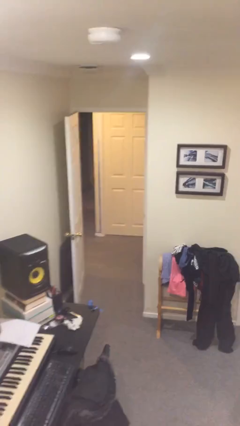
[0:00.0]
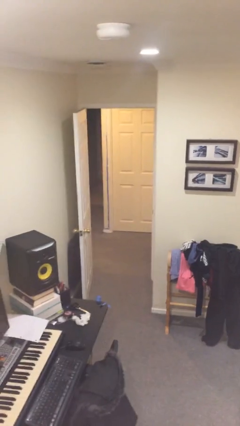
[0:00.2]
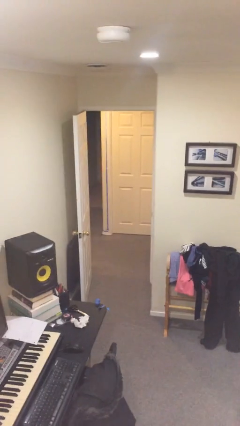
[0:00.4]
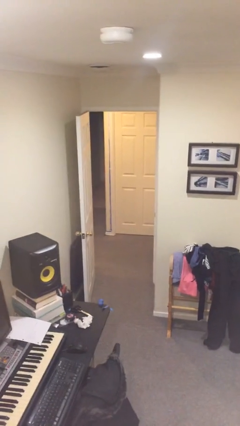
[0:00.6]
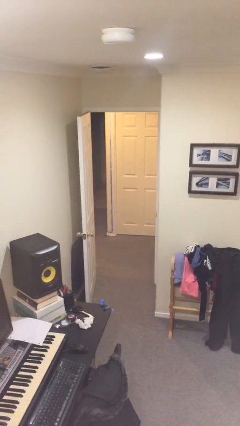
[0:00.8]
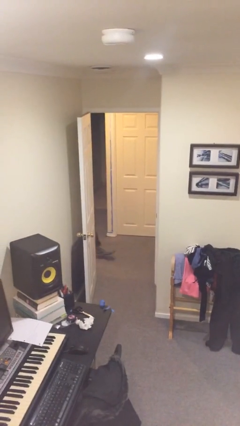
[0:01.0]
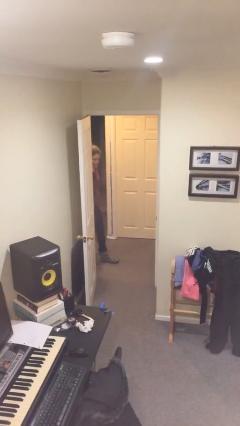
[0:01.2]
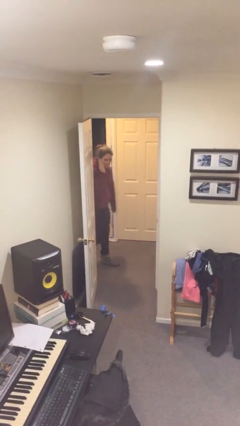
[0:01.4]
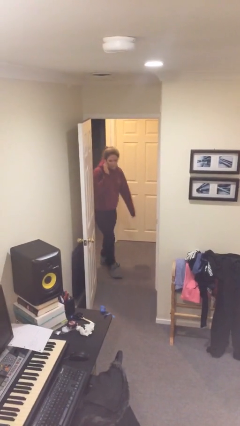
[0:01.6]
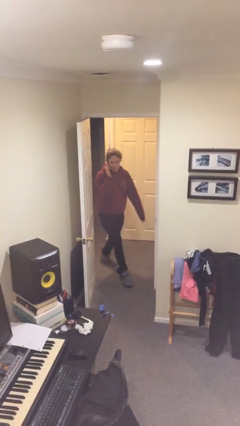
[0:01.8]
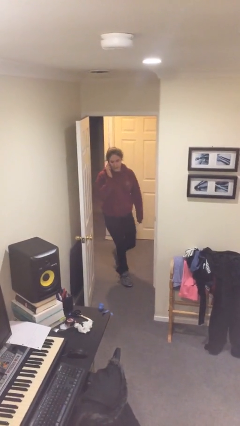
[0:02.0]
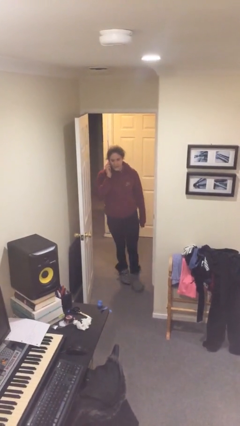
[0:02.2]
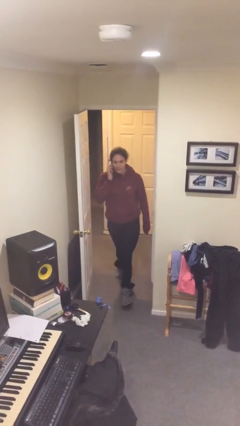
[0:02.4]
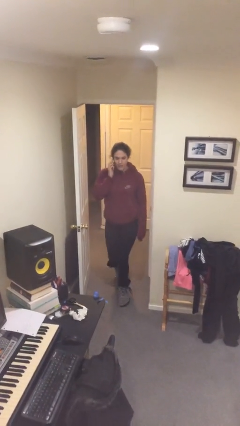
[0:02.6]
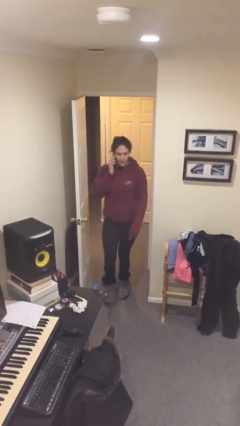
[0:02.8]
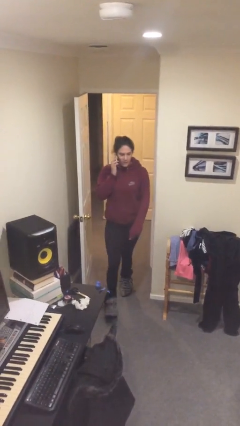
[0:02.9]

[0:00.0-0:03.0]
person enters scene through structure

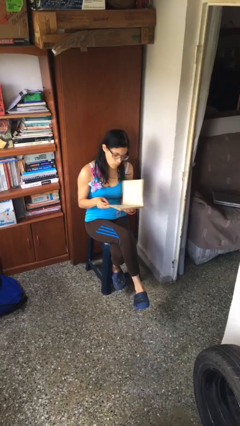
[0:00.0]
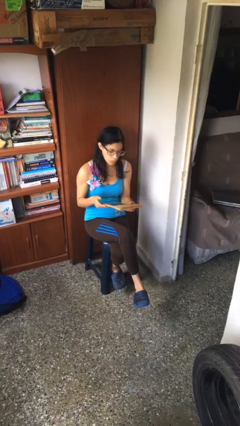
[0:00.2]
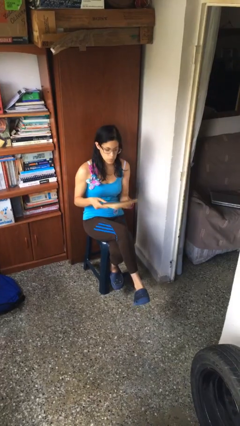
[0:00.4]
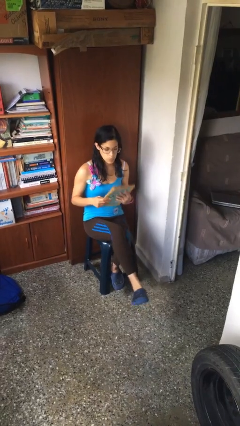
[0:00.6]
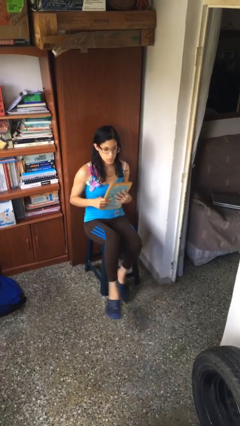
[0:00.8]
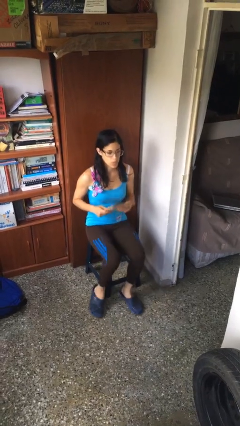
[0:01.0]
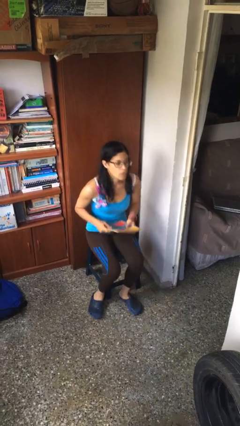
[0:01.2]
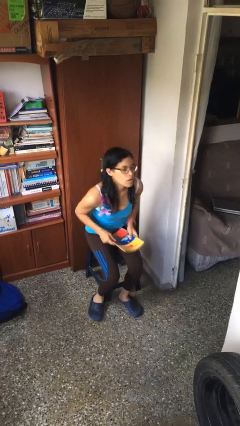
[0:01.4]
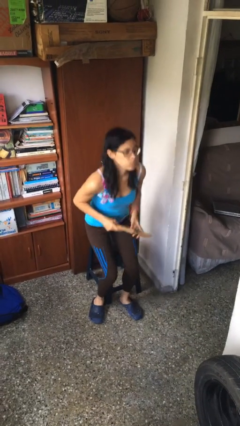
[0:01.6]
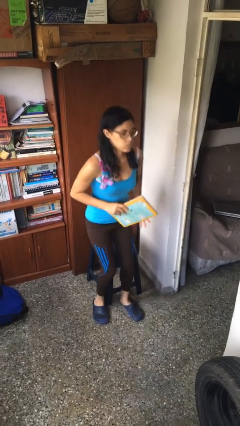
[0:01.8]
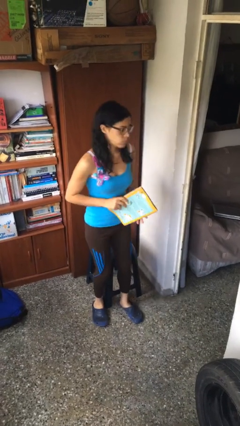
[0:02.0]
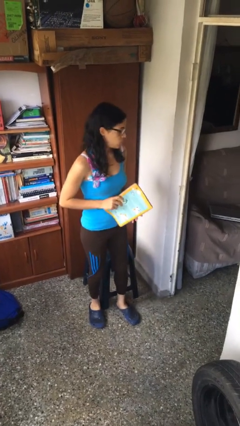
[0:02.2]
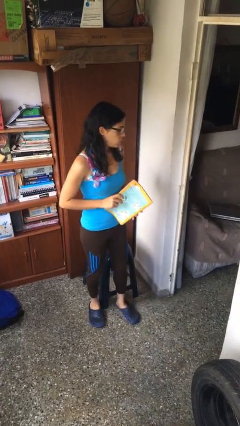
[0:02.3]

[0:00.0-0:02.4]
person stands up

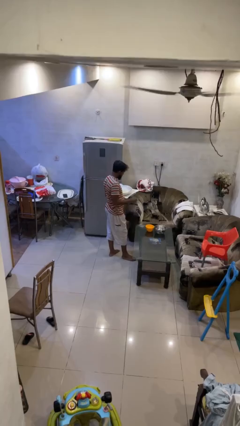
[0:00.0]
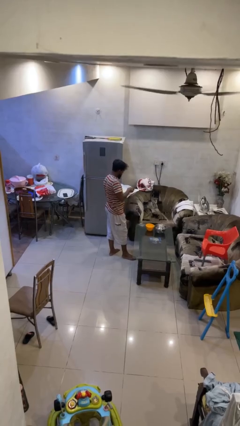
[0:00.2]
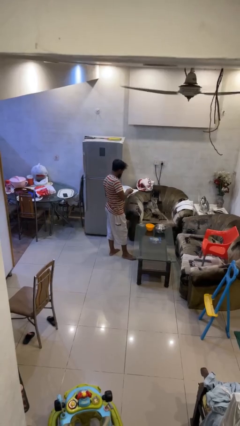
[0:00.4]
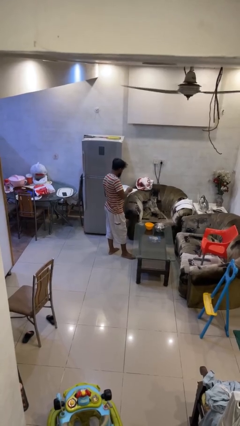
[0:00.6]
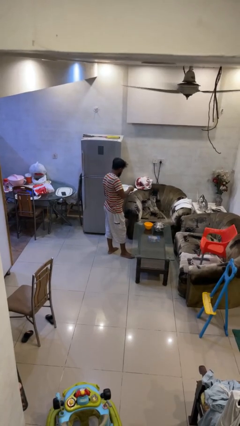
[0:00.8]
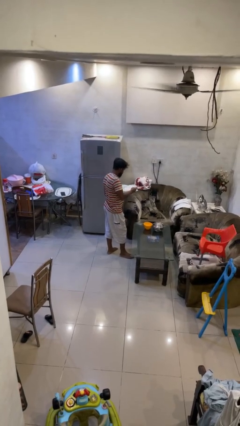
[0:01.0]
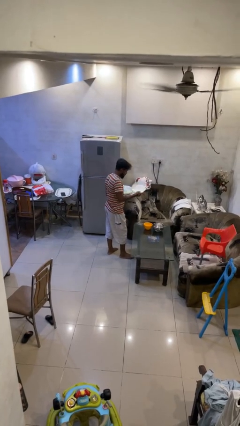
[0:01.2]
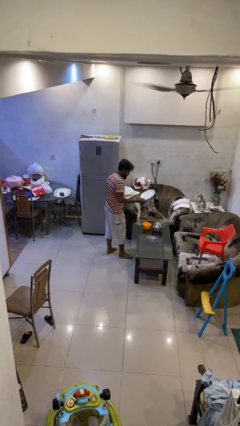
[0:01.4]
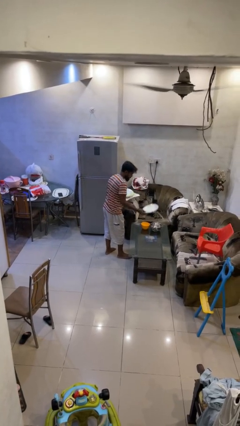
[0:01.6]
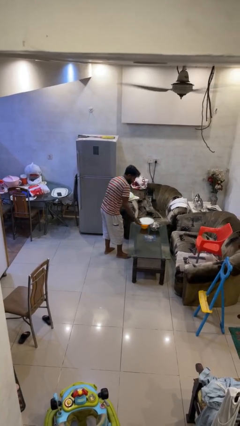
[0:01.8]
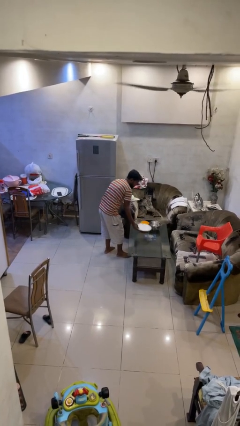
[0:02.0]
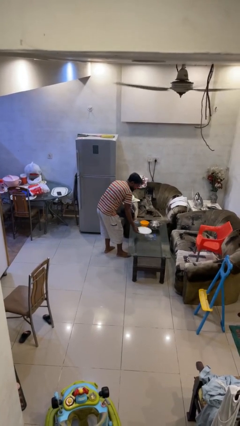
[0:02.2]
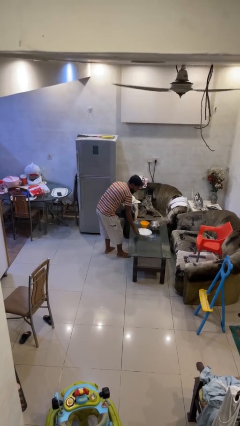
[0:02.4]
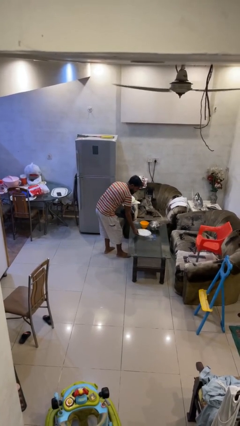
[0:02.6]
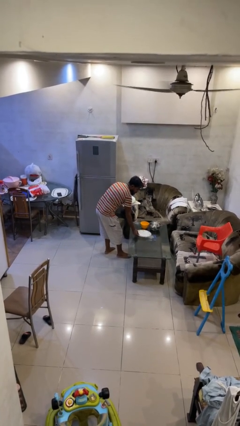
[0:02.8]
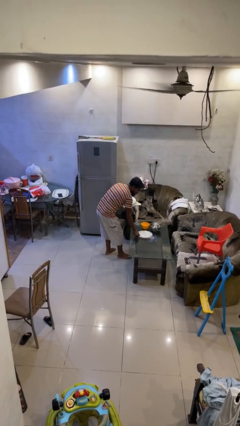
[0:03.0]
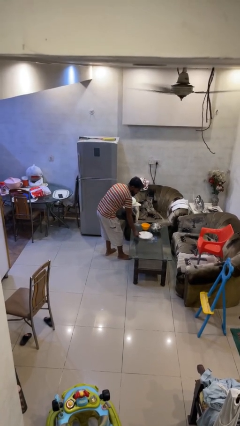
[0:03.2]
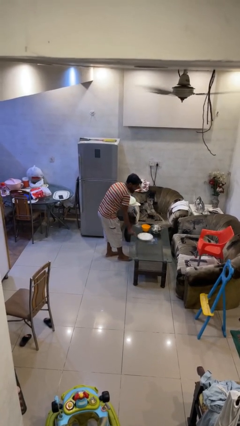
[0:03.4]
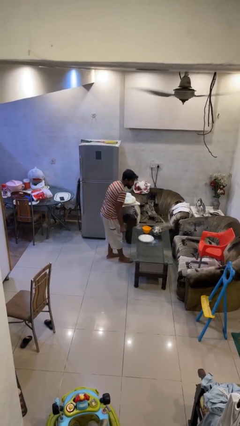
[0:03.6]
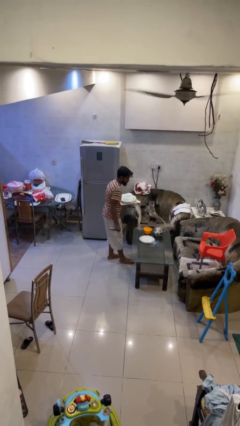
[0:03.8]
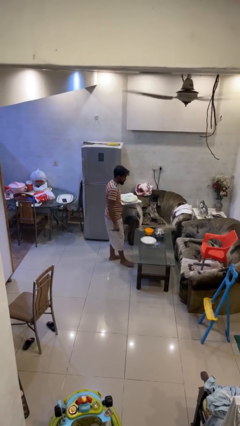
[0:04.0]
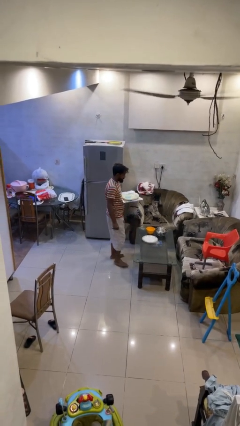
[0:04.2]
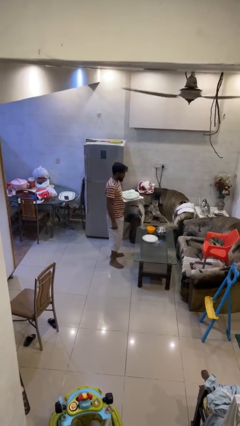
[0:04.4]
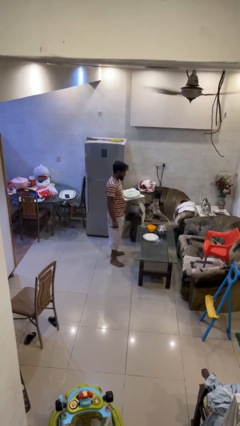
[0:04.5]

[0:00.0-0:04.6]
person sets table

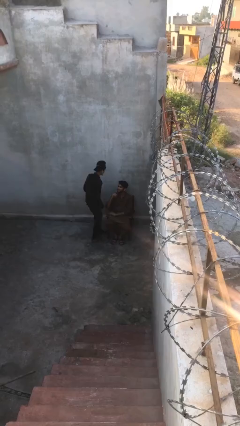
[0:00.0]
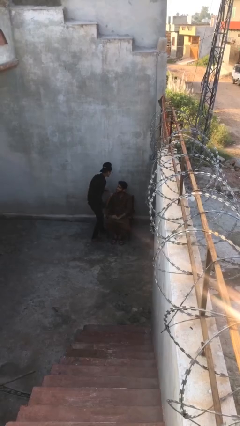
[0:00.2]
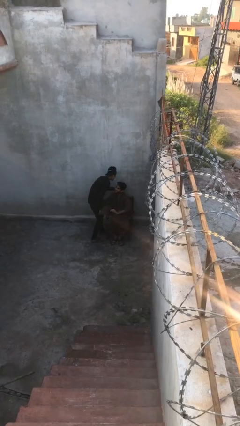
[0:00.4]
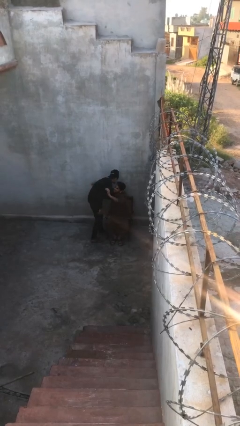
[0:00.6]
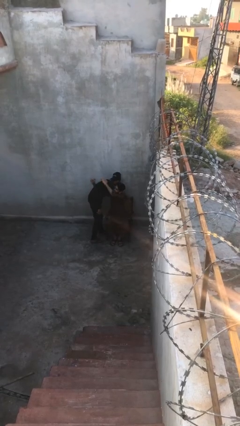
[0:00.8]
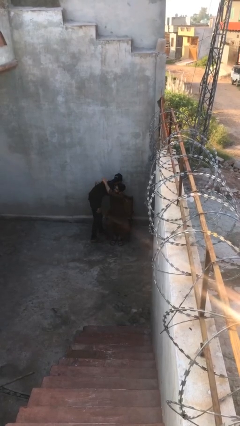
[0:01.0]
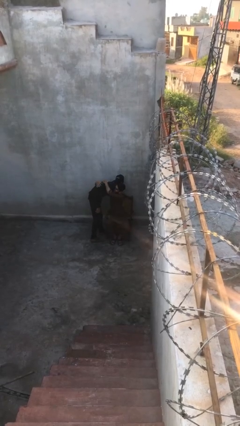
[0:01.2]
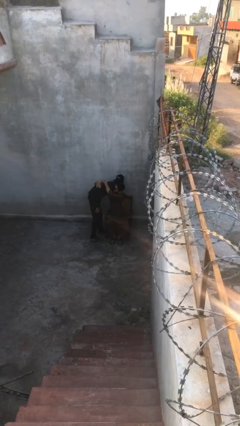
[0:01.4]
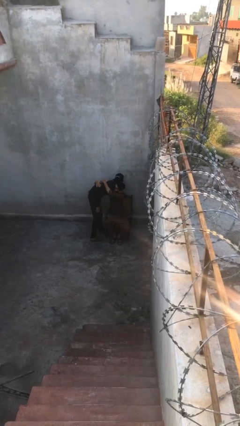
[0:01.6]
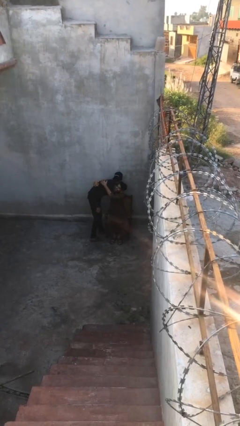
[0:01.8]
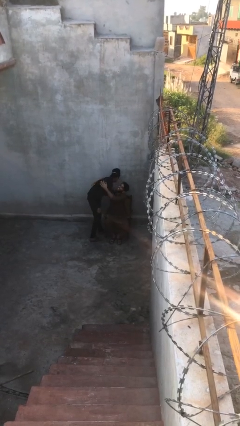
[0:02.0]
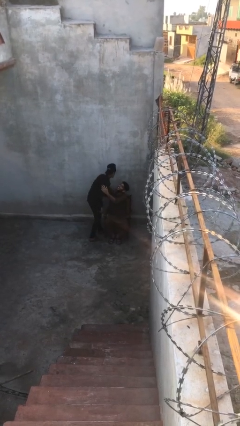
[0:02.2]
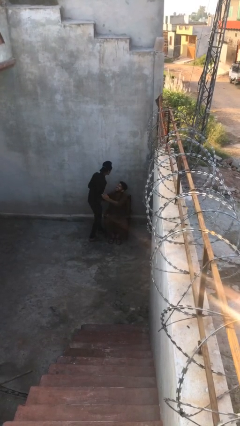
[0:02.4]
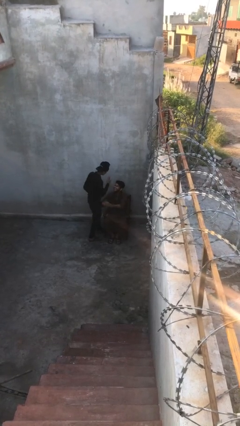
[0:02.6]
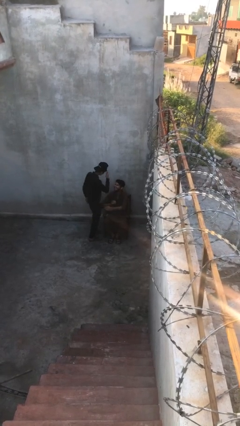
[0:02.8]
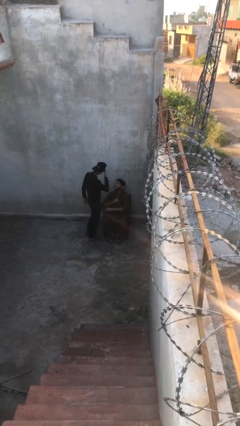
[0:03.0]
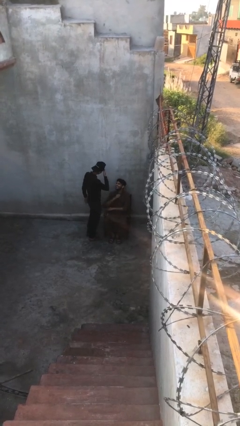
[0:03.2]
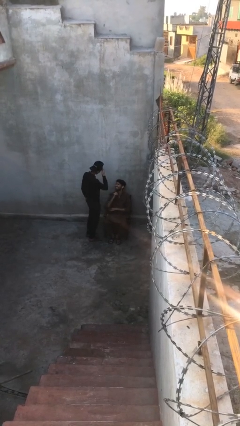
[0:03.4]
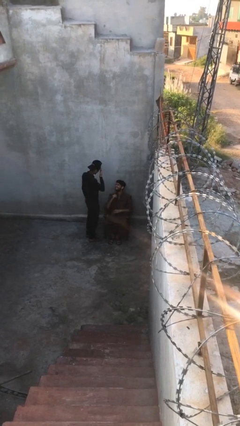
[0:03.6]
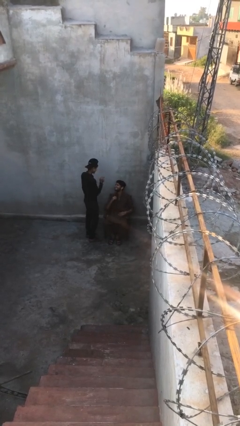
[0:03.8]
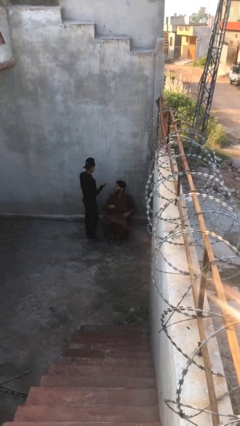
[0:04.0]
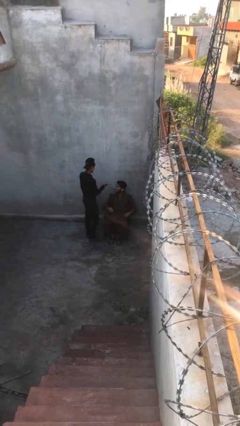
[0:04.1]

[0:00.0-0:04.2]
person embraces person

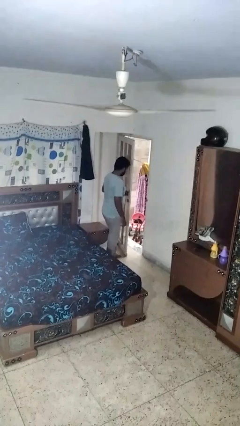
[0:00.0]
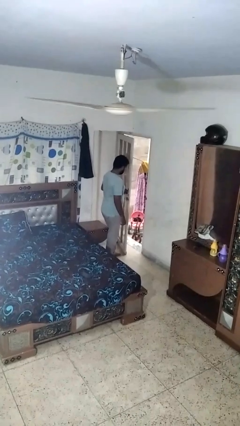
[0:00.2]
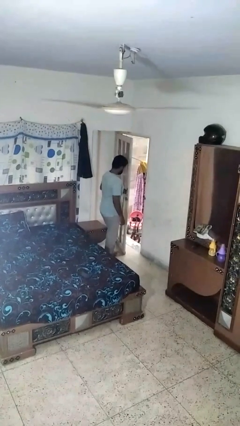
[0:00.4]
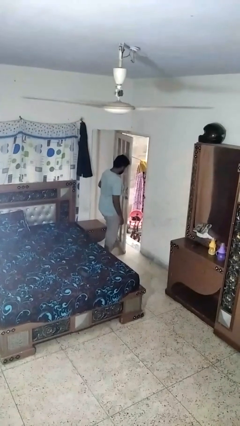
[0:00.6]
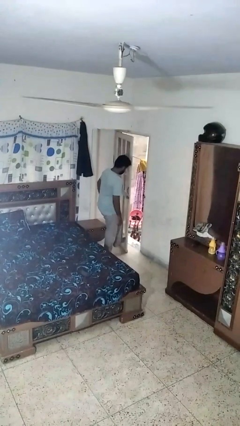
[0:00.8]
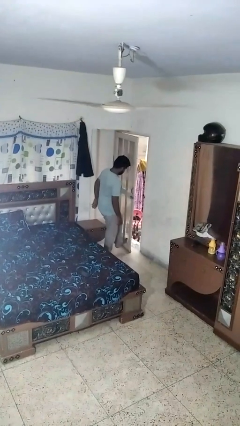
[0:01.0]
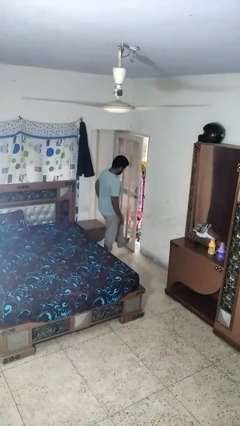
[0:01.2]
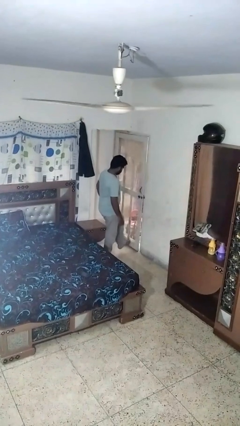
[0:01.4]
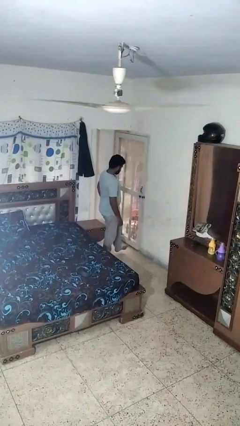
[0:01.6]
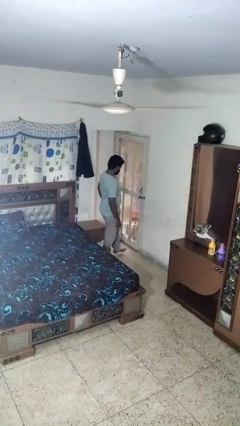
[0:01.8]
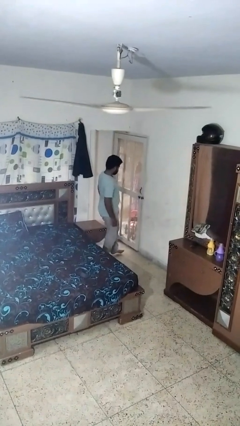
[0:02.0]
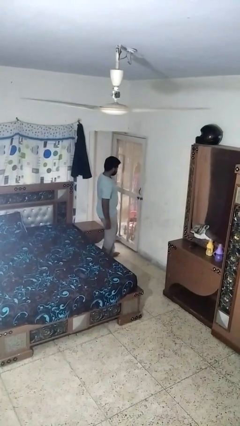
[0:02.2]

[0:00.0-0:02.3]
person closes door with foot

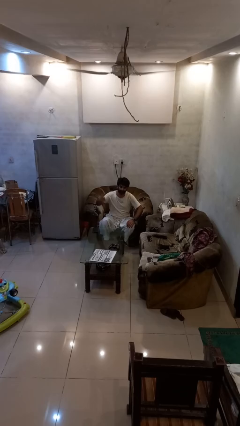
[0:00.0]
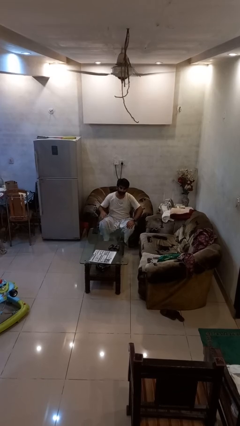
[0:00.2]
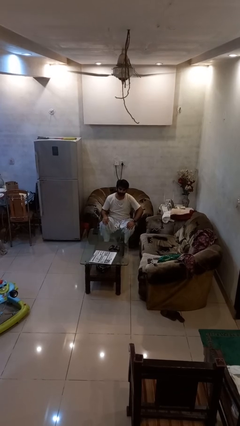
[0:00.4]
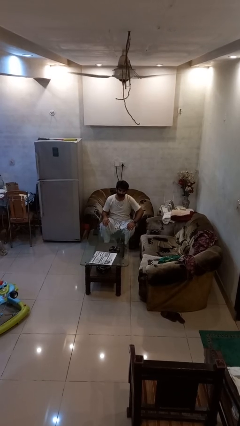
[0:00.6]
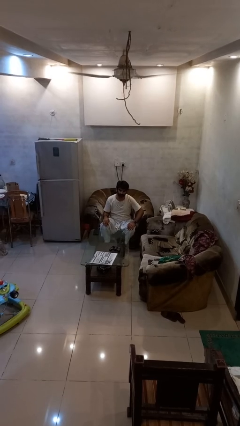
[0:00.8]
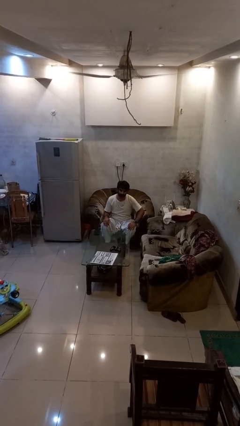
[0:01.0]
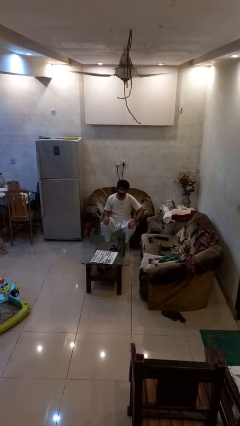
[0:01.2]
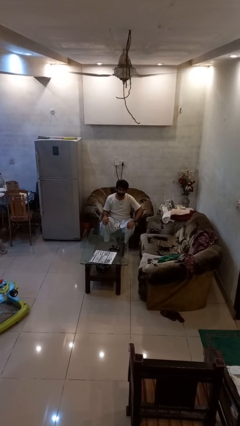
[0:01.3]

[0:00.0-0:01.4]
person gestures lower hand
